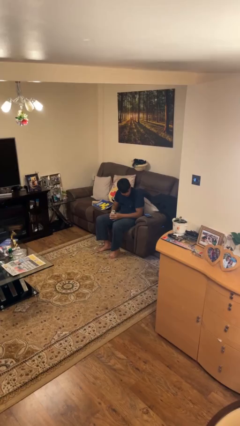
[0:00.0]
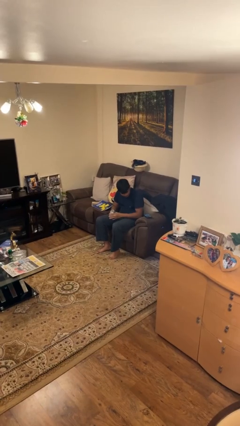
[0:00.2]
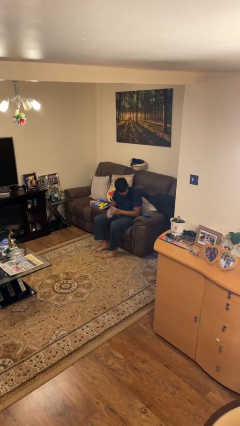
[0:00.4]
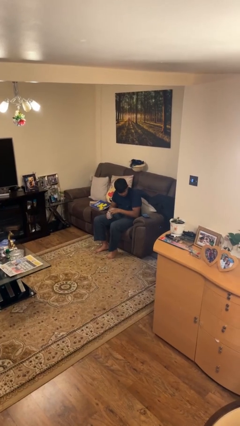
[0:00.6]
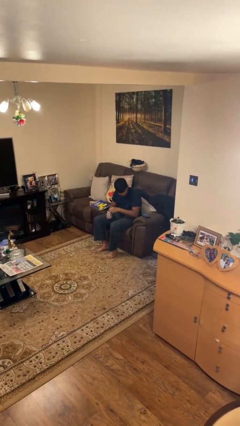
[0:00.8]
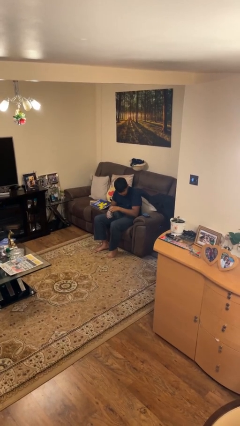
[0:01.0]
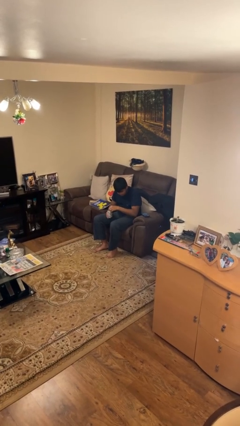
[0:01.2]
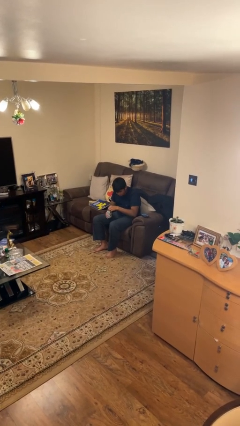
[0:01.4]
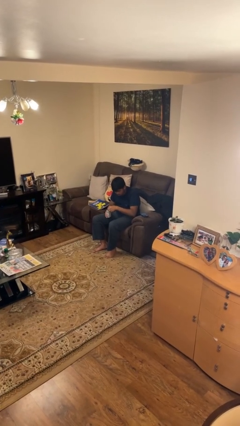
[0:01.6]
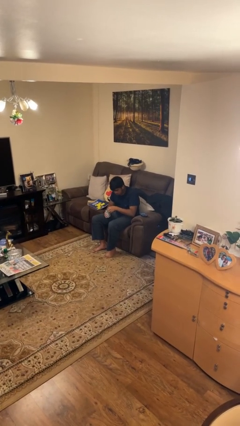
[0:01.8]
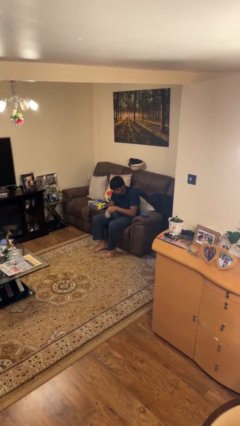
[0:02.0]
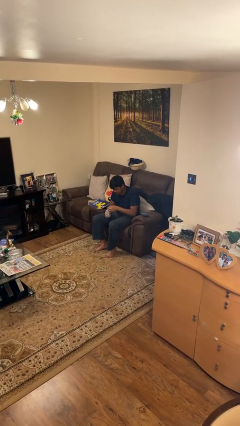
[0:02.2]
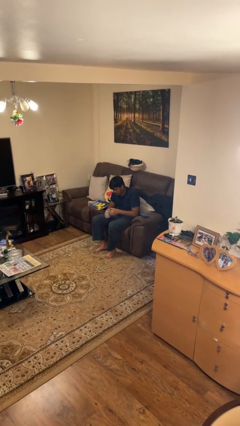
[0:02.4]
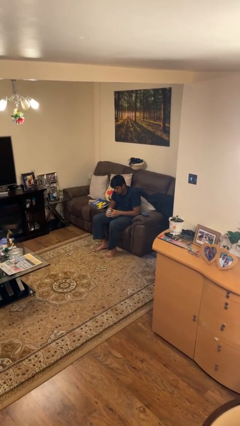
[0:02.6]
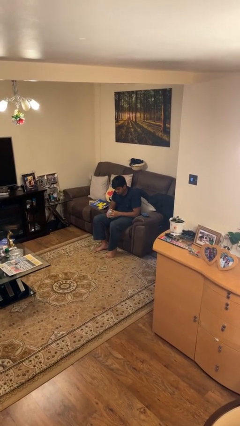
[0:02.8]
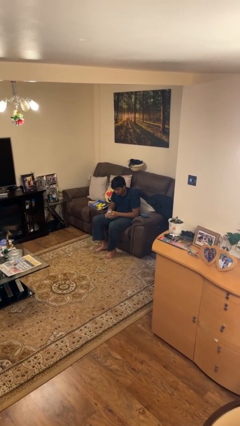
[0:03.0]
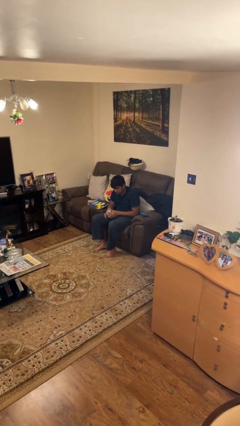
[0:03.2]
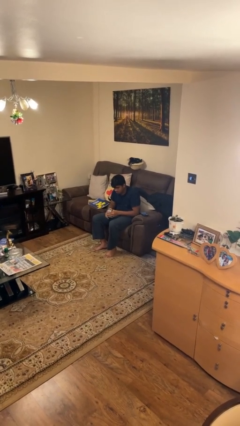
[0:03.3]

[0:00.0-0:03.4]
person opens beverage can

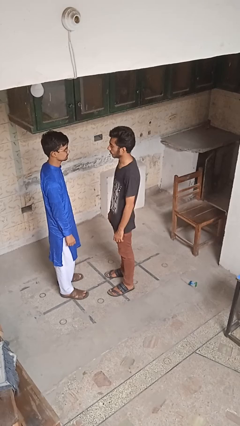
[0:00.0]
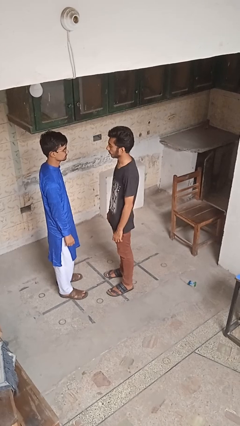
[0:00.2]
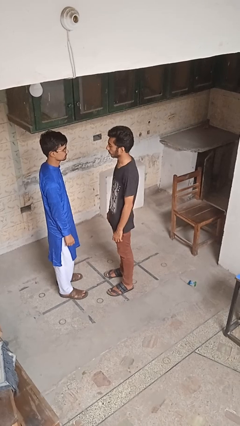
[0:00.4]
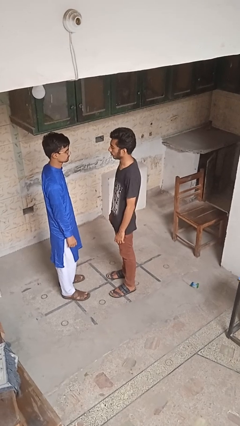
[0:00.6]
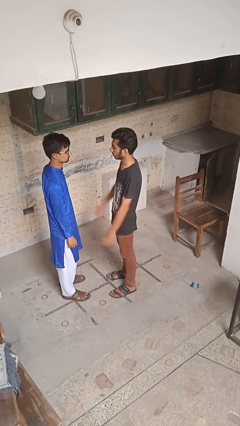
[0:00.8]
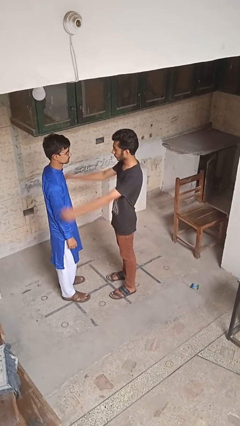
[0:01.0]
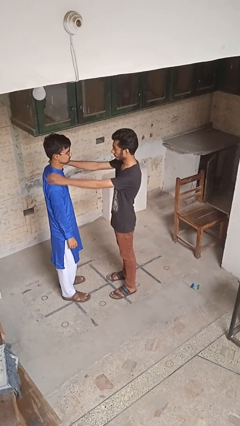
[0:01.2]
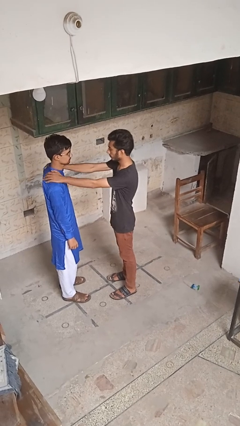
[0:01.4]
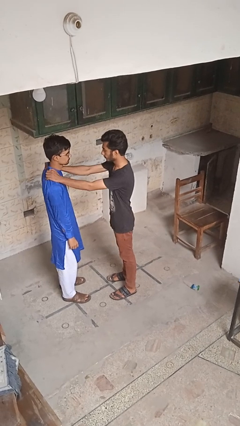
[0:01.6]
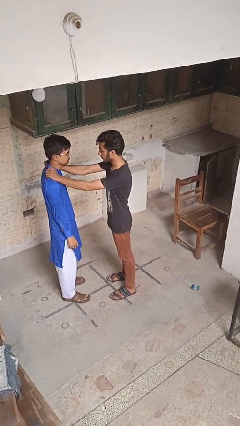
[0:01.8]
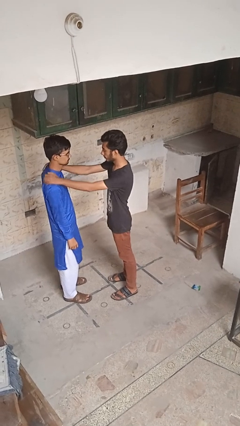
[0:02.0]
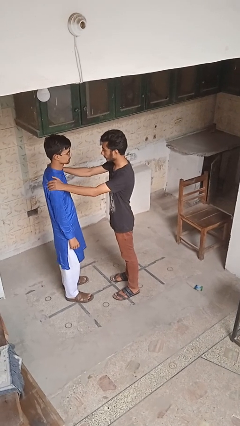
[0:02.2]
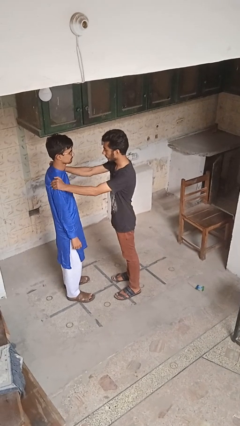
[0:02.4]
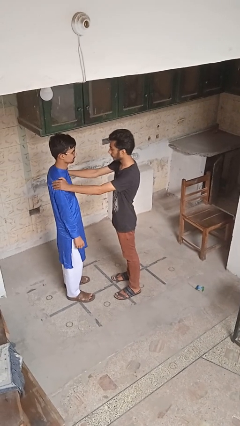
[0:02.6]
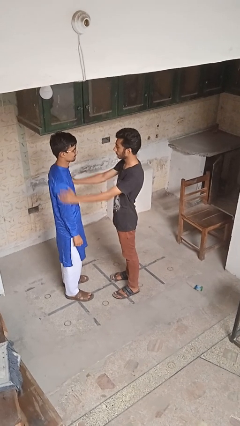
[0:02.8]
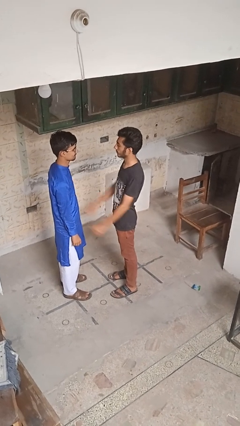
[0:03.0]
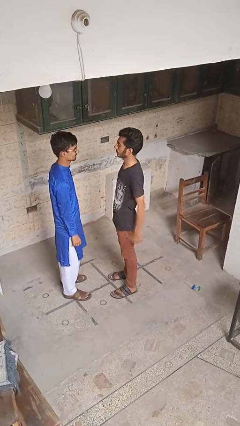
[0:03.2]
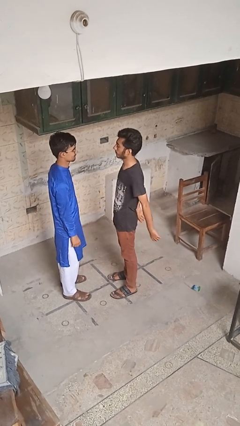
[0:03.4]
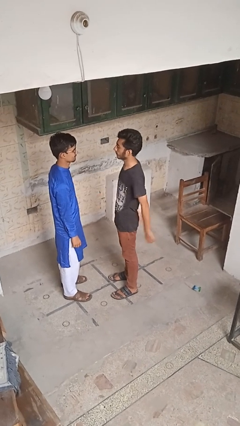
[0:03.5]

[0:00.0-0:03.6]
person pounds shoulders of person

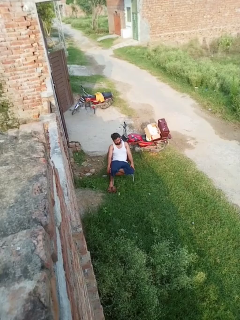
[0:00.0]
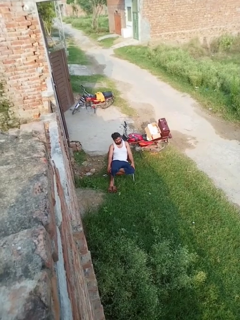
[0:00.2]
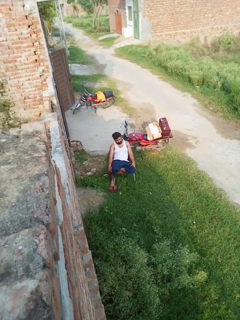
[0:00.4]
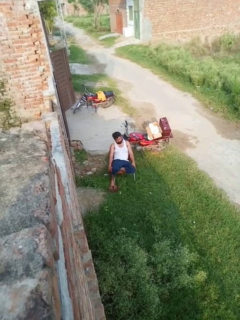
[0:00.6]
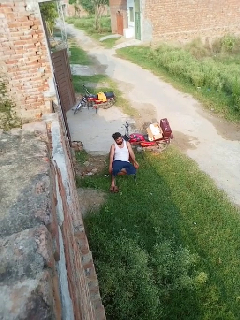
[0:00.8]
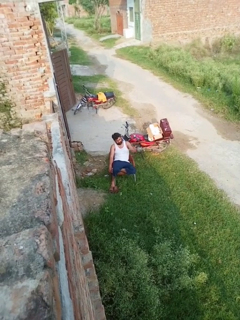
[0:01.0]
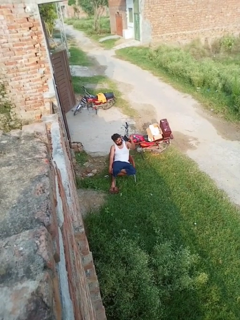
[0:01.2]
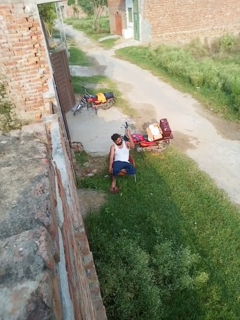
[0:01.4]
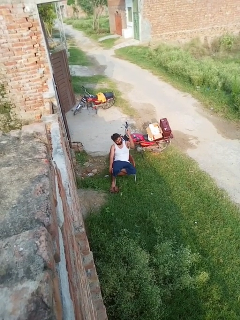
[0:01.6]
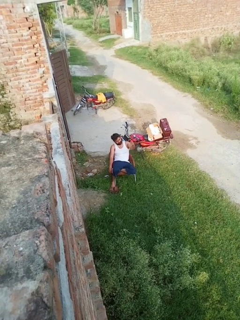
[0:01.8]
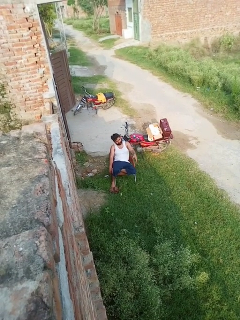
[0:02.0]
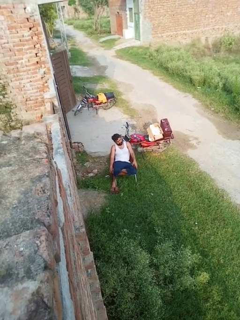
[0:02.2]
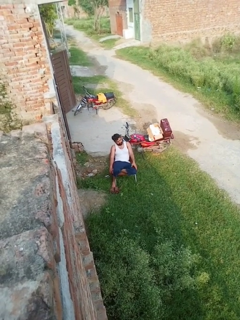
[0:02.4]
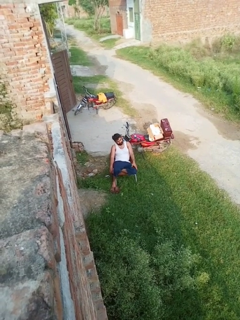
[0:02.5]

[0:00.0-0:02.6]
person gestures lower hand

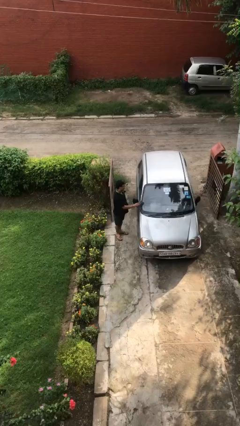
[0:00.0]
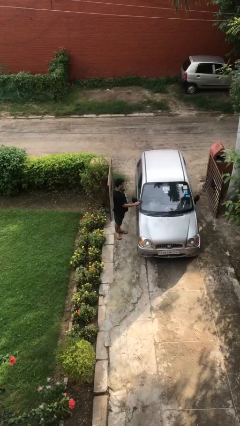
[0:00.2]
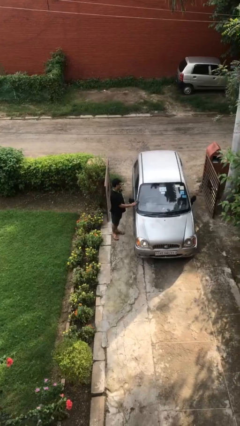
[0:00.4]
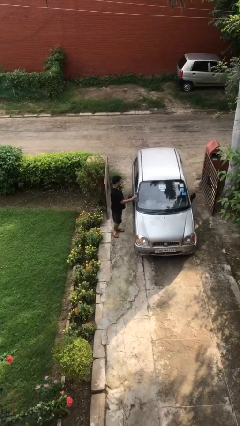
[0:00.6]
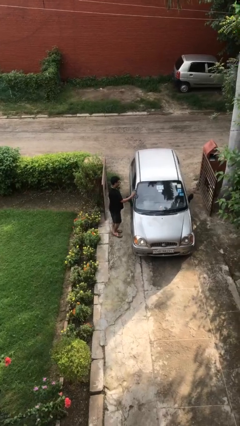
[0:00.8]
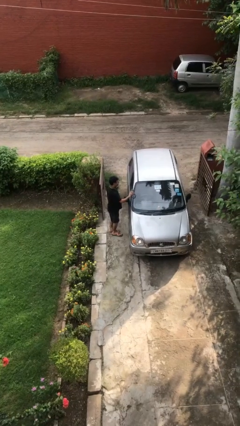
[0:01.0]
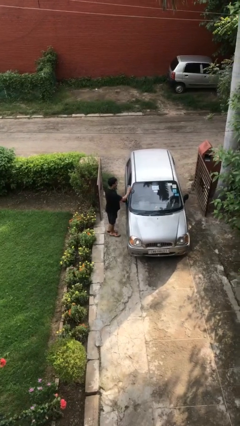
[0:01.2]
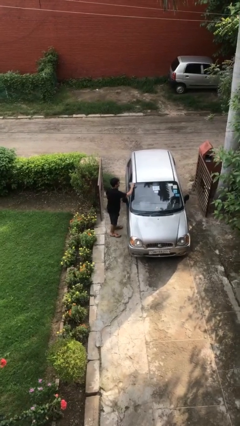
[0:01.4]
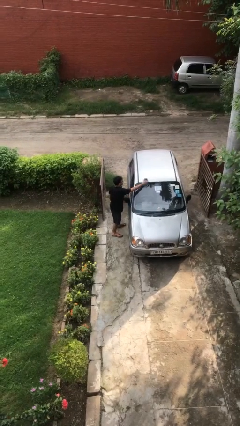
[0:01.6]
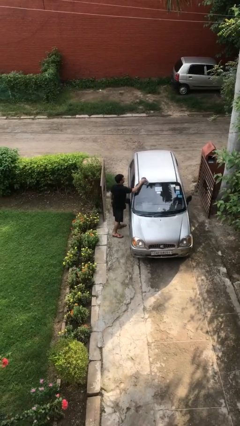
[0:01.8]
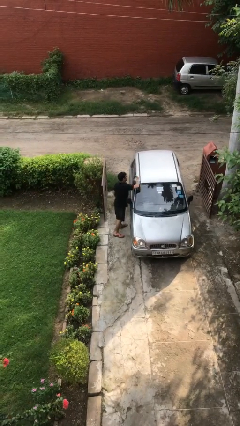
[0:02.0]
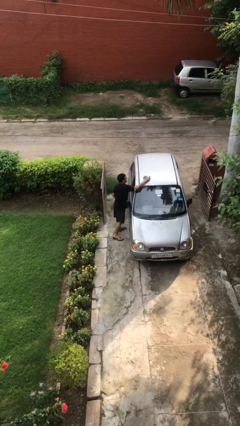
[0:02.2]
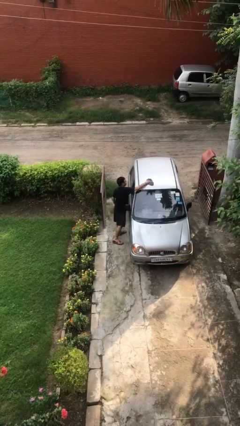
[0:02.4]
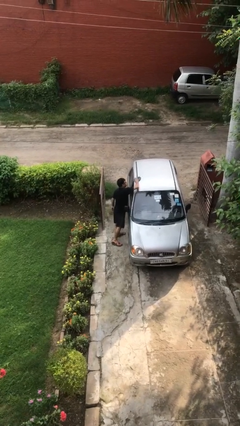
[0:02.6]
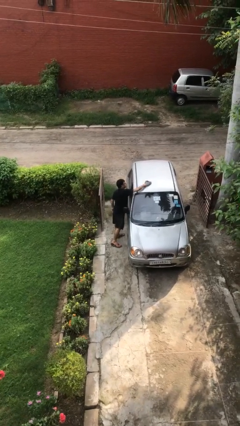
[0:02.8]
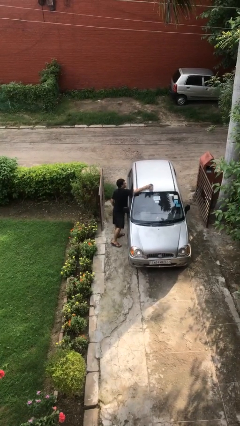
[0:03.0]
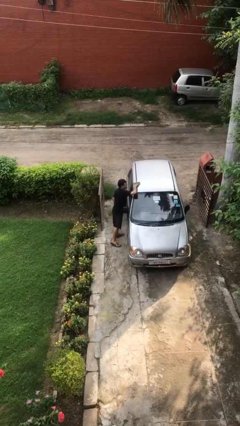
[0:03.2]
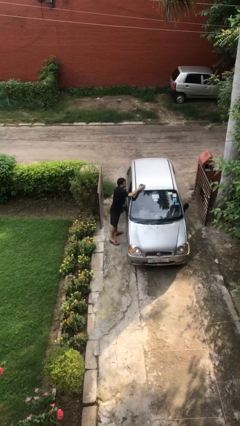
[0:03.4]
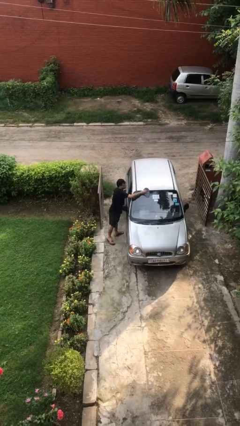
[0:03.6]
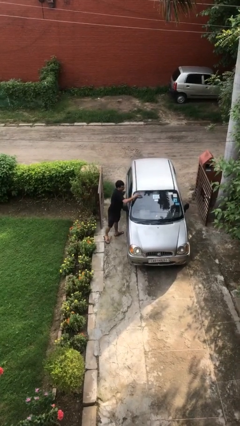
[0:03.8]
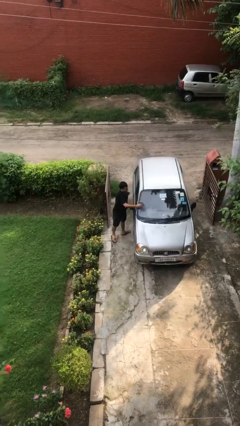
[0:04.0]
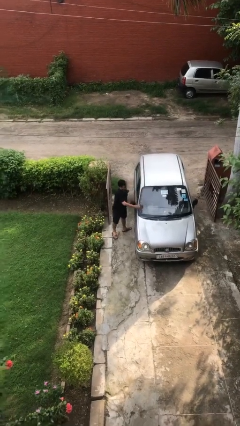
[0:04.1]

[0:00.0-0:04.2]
person polishes car with rag

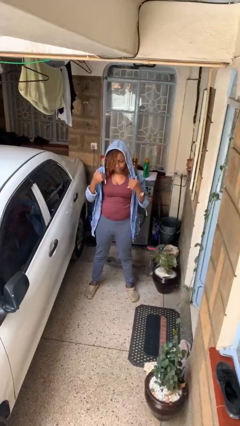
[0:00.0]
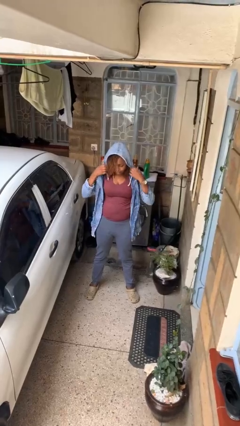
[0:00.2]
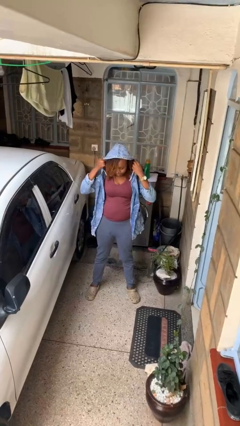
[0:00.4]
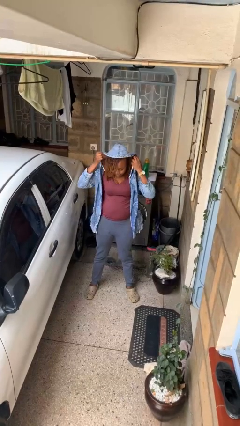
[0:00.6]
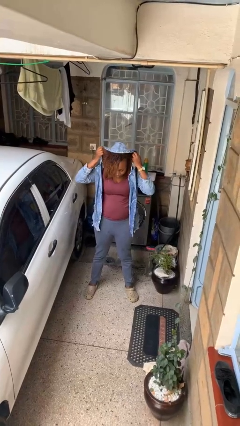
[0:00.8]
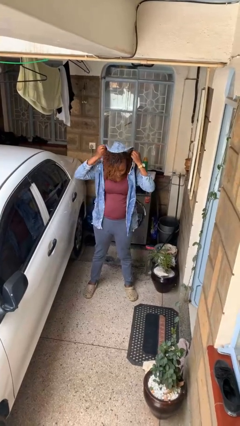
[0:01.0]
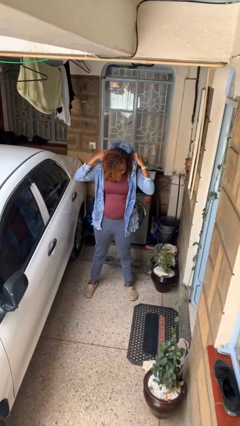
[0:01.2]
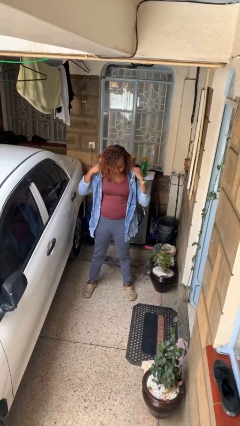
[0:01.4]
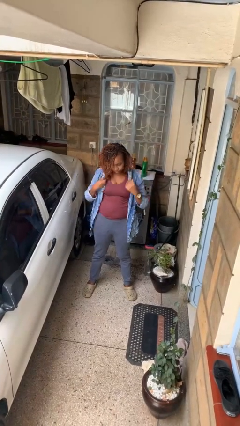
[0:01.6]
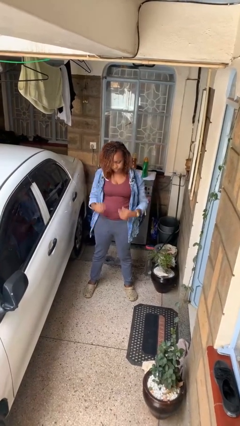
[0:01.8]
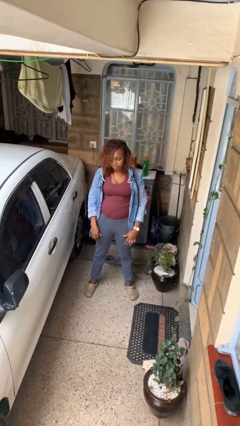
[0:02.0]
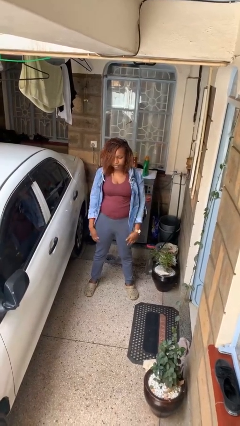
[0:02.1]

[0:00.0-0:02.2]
person takes off hoodie

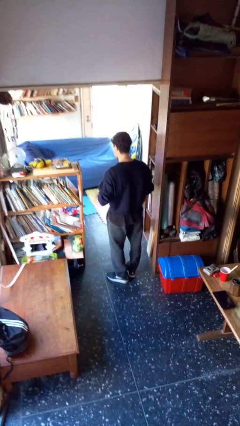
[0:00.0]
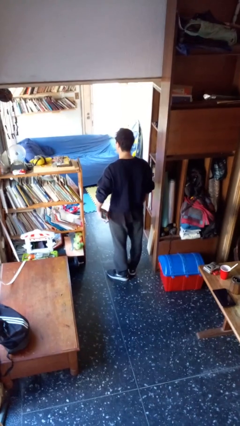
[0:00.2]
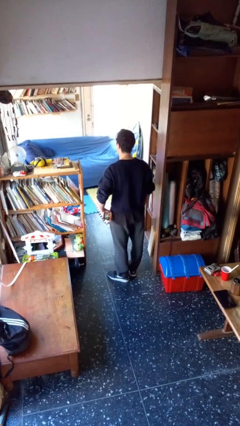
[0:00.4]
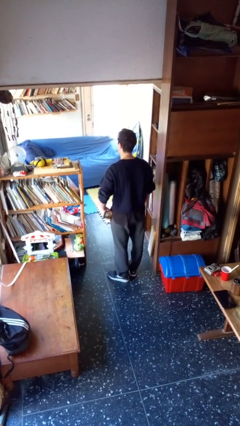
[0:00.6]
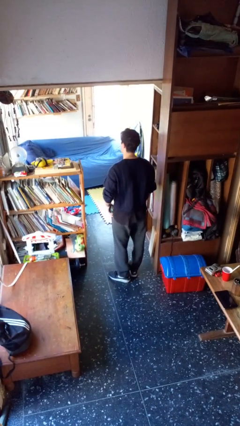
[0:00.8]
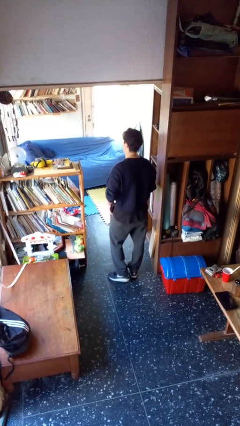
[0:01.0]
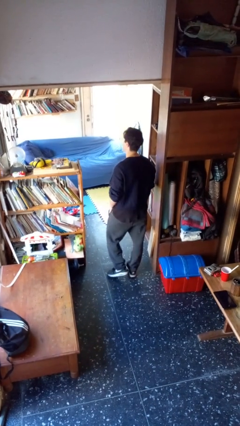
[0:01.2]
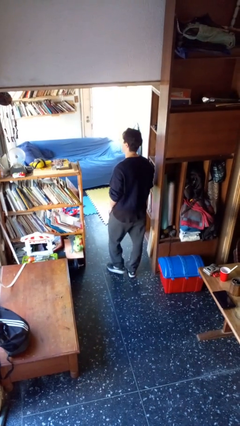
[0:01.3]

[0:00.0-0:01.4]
person puts phone into pocket
